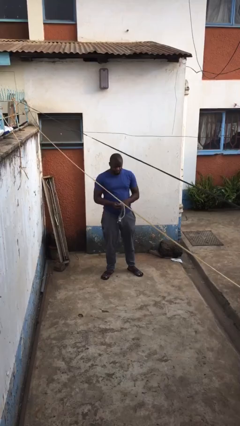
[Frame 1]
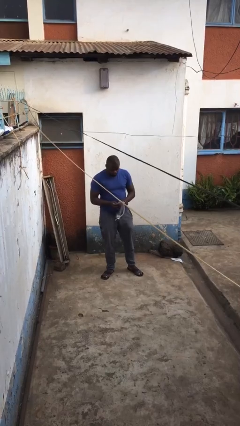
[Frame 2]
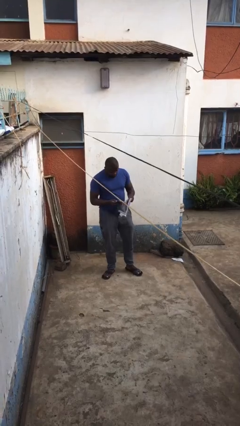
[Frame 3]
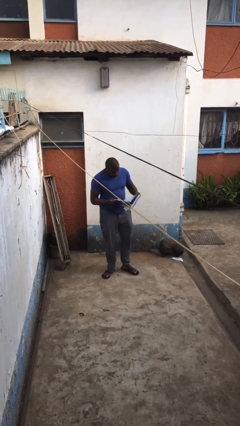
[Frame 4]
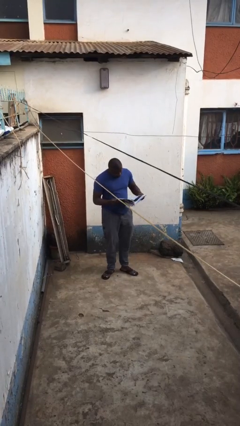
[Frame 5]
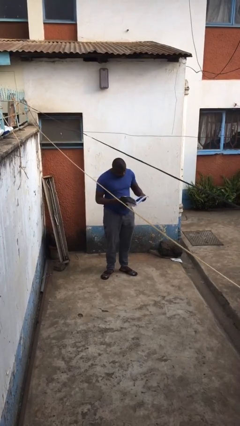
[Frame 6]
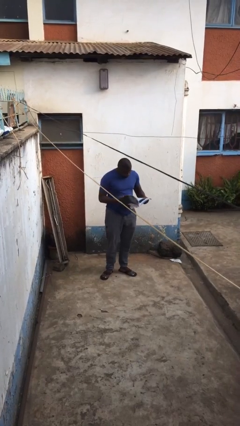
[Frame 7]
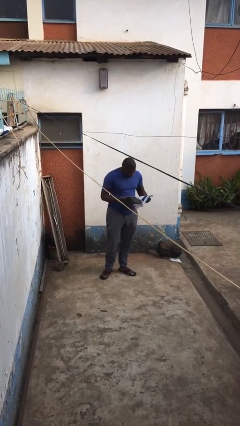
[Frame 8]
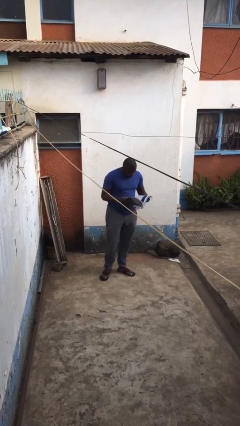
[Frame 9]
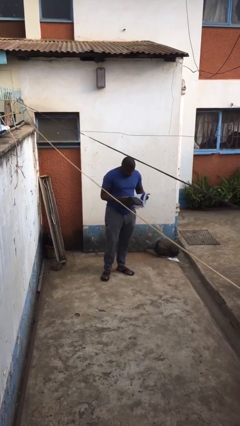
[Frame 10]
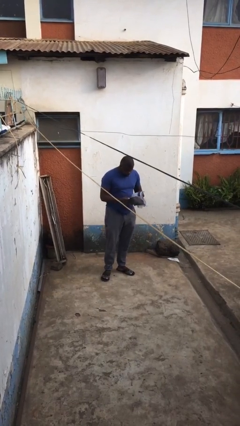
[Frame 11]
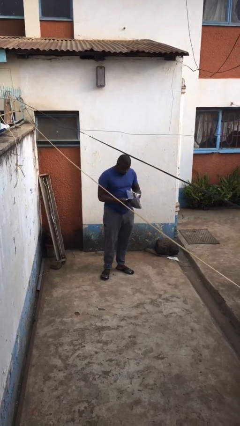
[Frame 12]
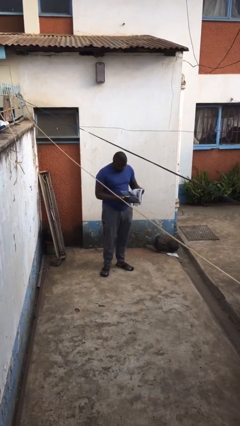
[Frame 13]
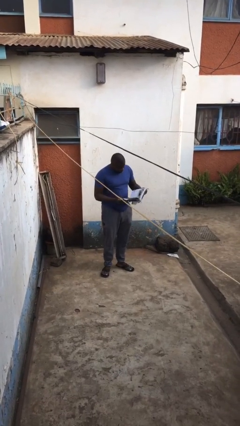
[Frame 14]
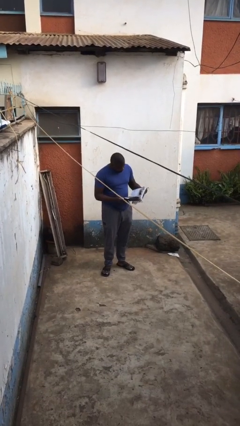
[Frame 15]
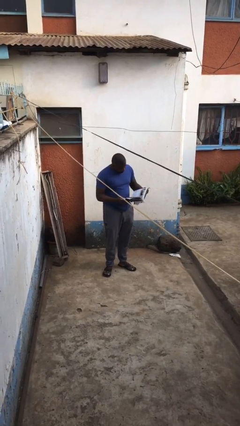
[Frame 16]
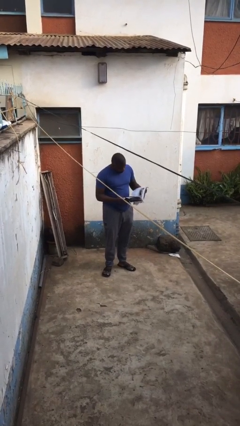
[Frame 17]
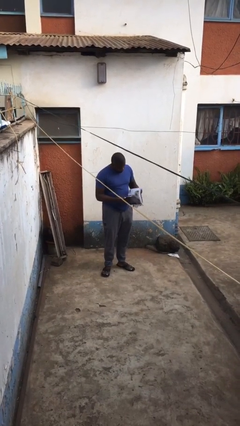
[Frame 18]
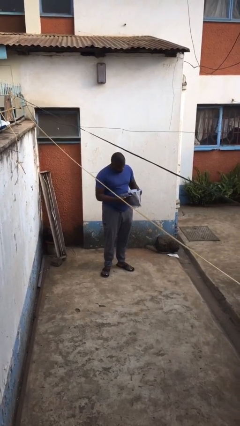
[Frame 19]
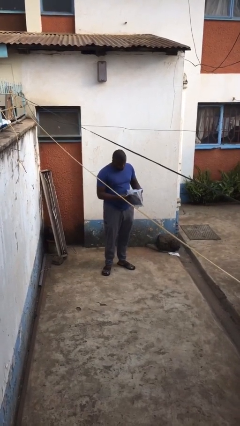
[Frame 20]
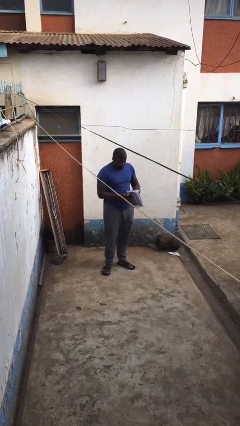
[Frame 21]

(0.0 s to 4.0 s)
person reads magazine

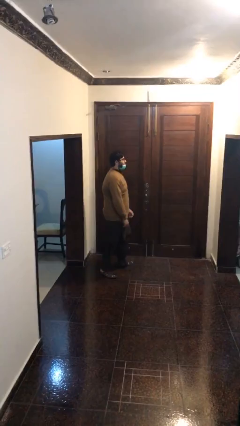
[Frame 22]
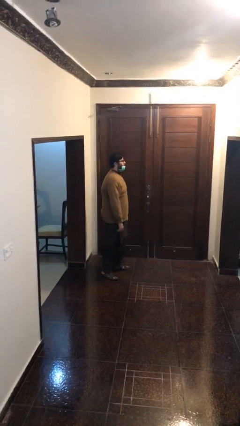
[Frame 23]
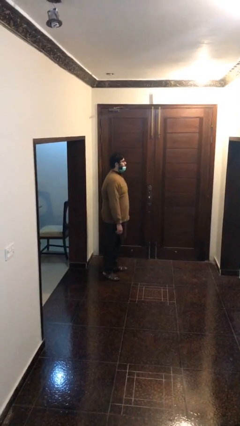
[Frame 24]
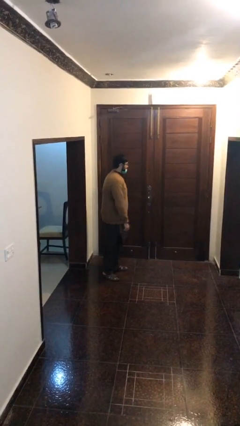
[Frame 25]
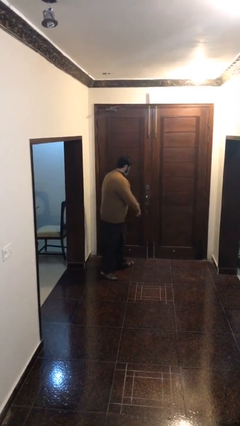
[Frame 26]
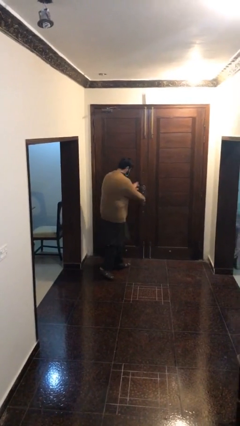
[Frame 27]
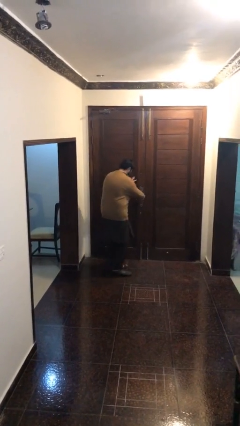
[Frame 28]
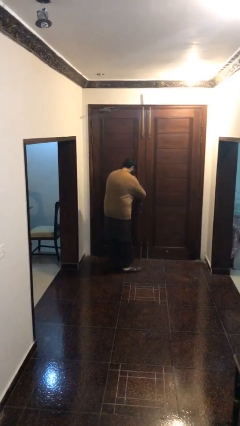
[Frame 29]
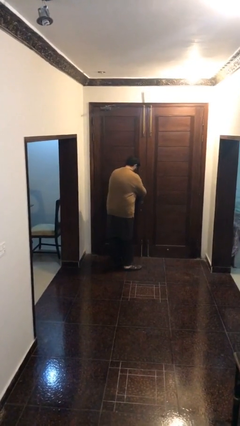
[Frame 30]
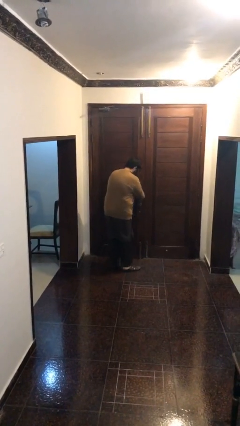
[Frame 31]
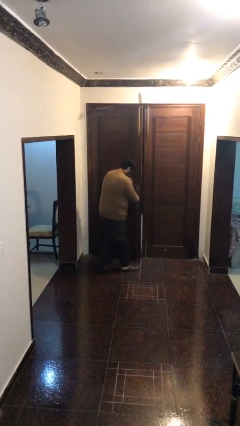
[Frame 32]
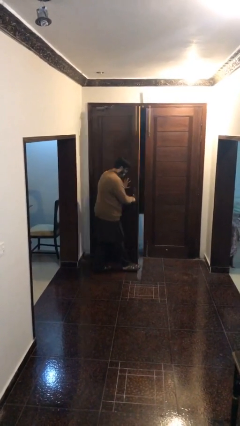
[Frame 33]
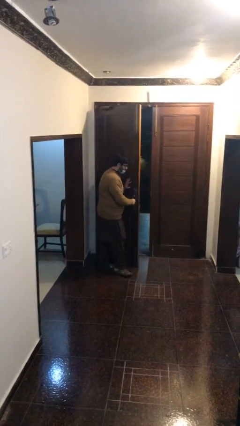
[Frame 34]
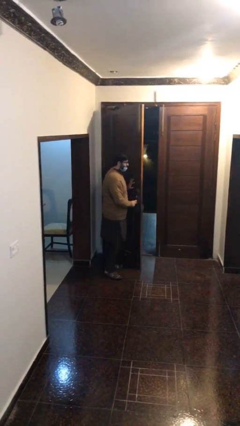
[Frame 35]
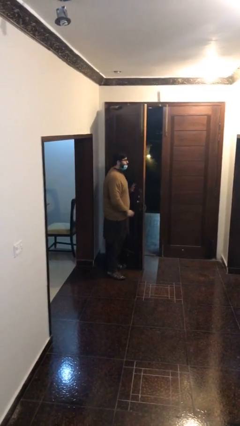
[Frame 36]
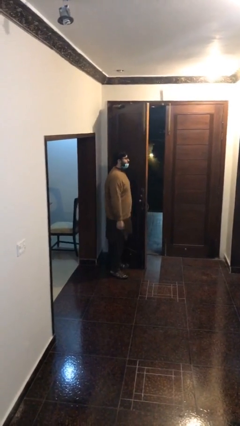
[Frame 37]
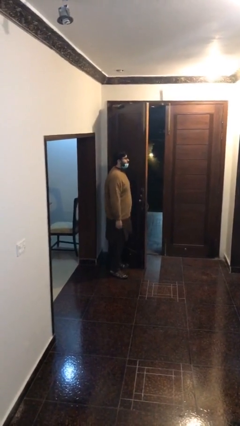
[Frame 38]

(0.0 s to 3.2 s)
person opens facility door

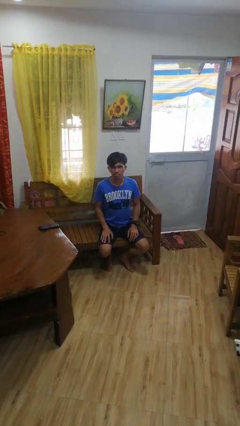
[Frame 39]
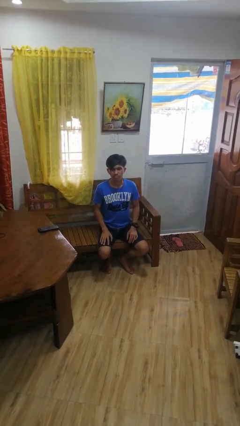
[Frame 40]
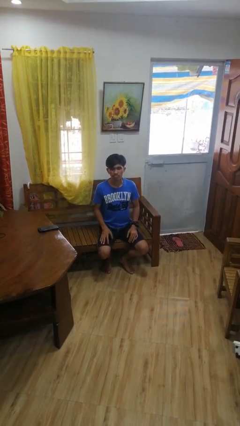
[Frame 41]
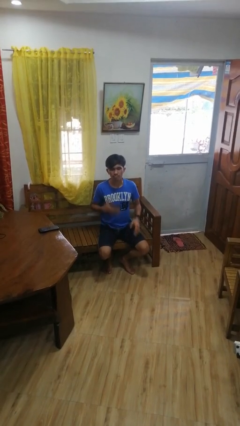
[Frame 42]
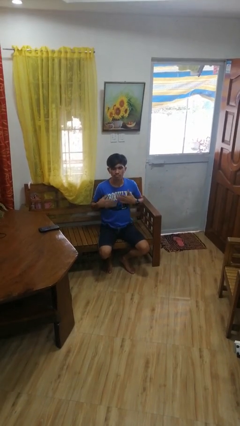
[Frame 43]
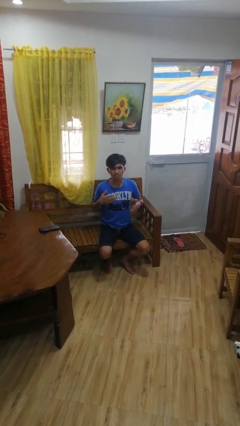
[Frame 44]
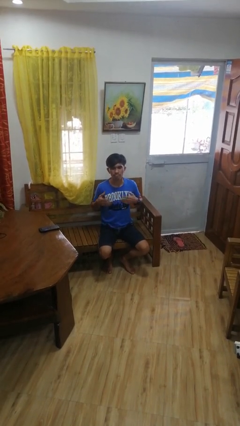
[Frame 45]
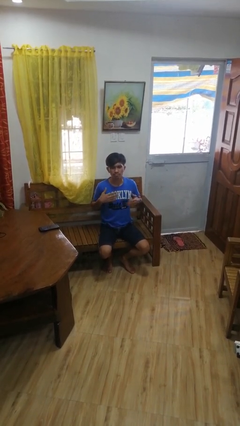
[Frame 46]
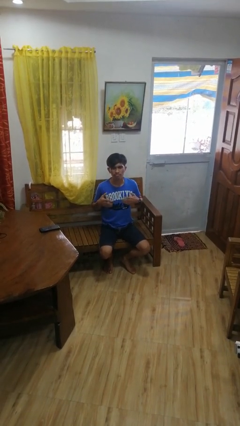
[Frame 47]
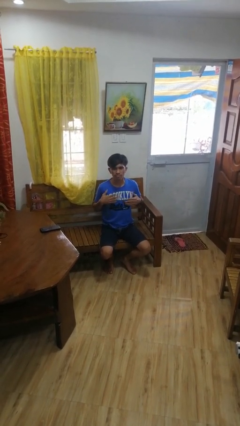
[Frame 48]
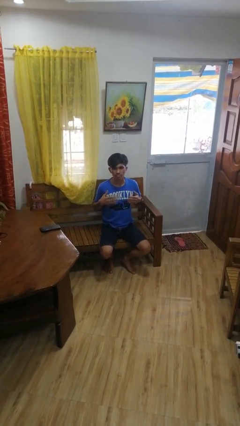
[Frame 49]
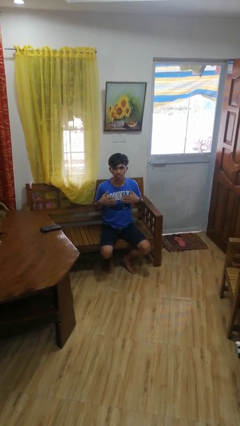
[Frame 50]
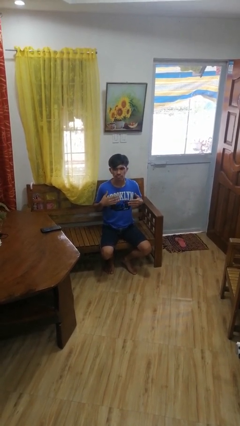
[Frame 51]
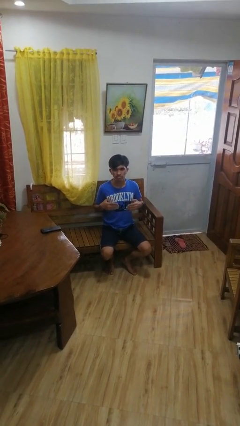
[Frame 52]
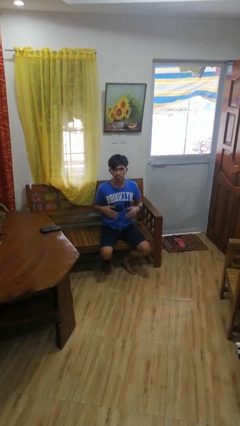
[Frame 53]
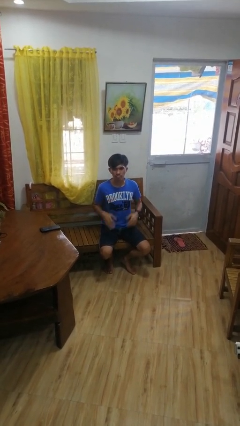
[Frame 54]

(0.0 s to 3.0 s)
person drums on chest

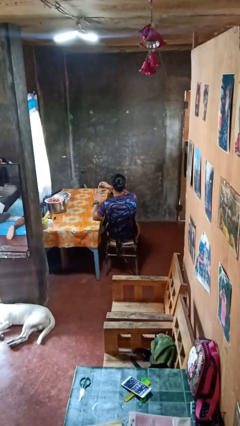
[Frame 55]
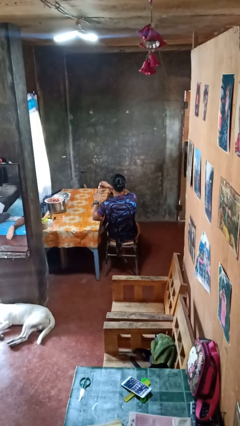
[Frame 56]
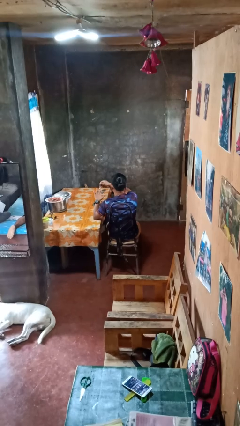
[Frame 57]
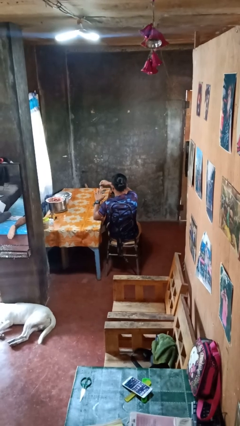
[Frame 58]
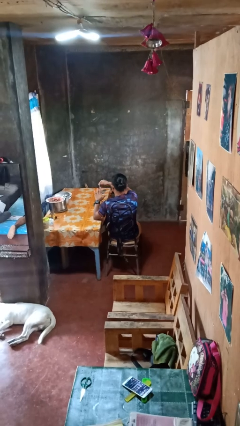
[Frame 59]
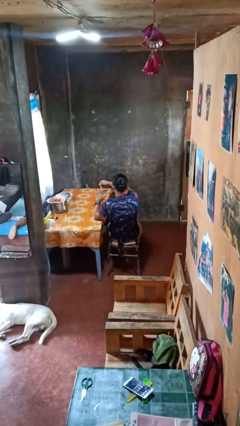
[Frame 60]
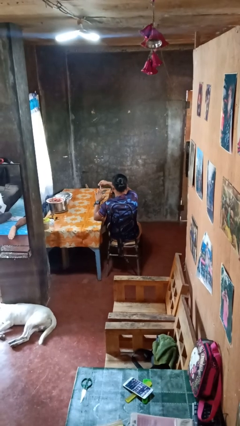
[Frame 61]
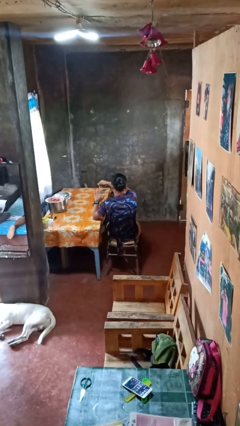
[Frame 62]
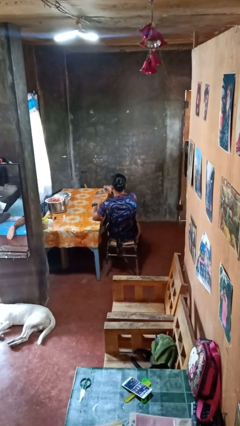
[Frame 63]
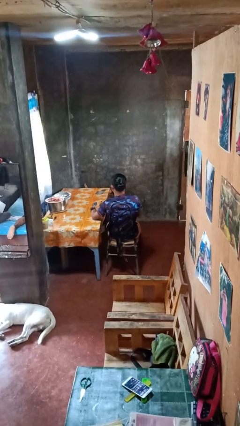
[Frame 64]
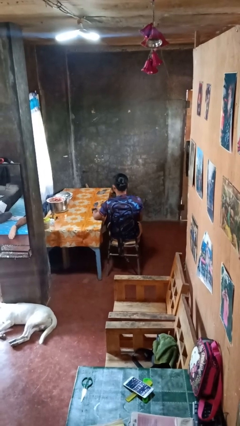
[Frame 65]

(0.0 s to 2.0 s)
person clips fingernails

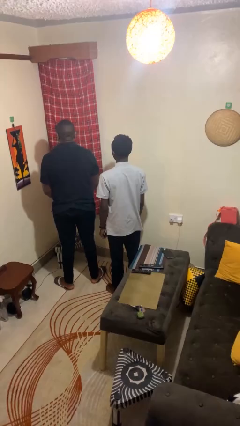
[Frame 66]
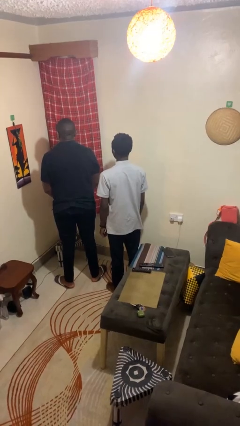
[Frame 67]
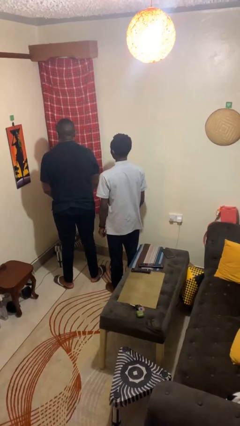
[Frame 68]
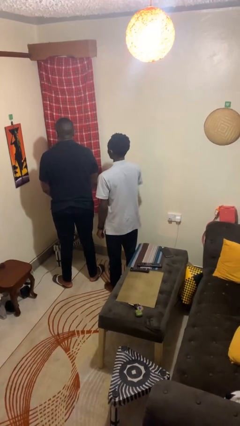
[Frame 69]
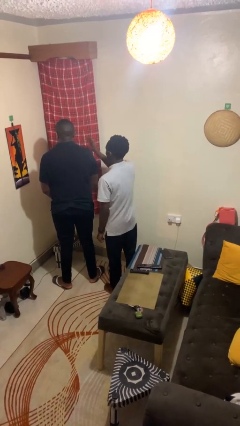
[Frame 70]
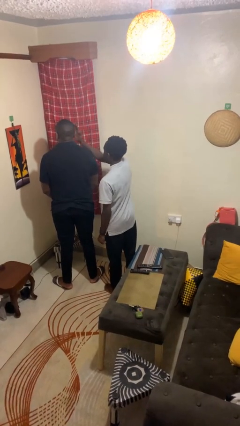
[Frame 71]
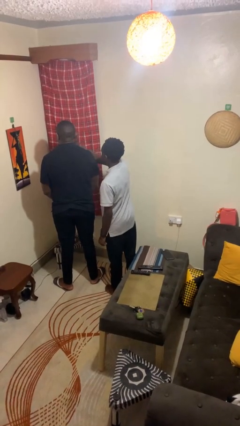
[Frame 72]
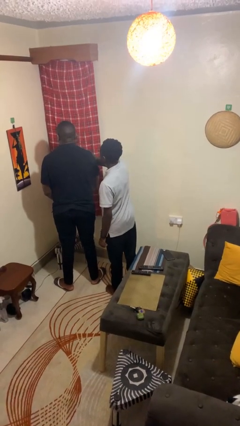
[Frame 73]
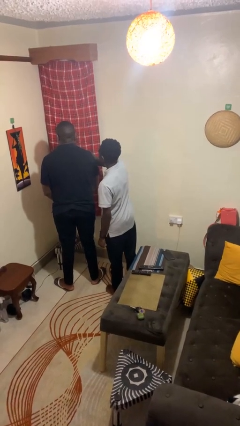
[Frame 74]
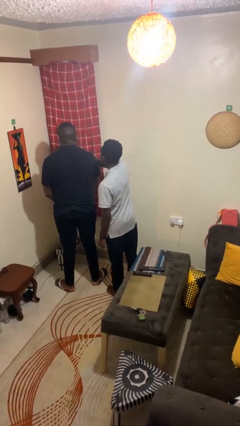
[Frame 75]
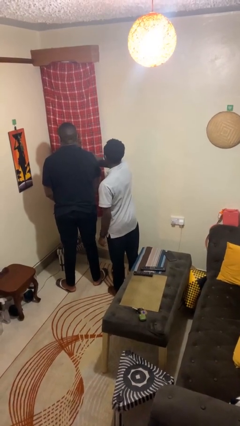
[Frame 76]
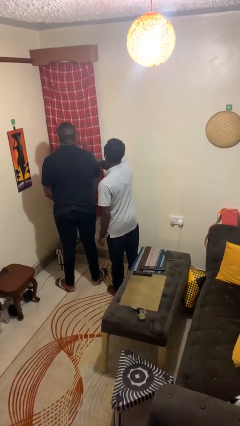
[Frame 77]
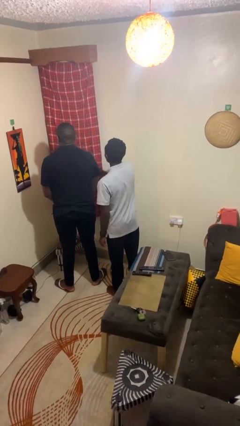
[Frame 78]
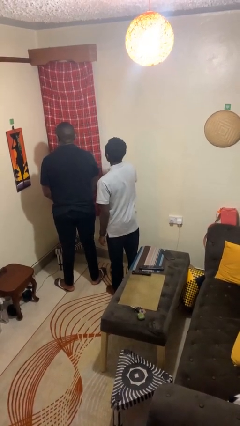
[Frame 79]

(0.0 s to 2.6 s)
person touches face of person

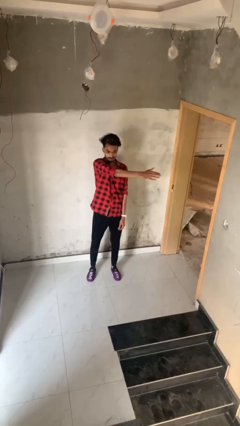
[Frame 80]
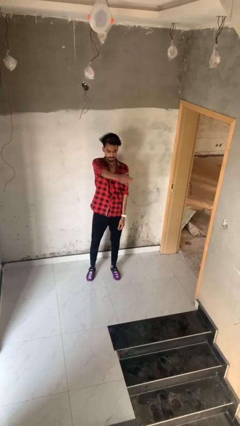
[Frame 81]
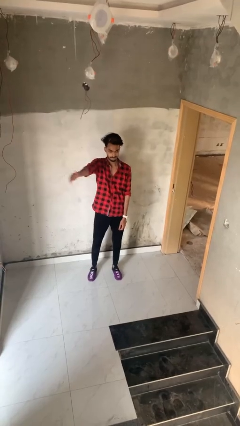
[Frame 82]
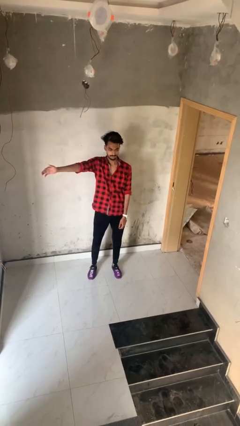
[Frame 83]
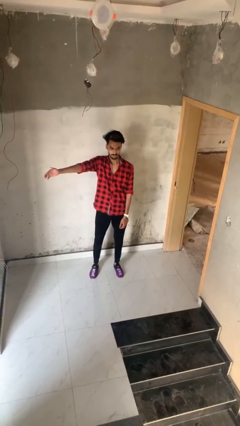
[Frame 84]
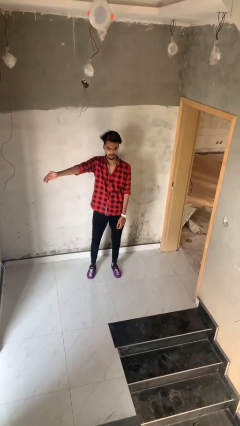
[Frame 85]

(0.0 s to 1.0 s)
person gestures swipe right

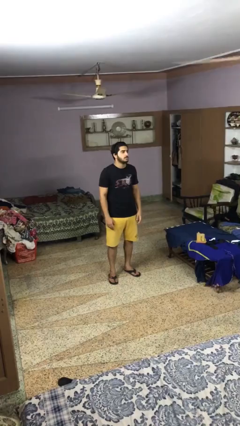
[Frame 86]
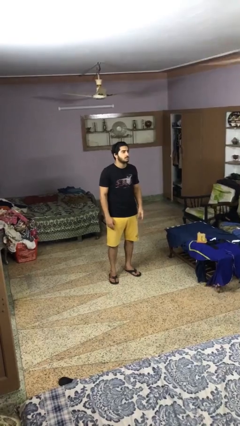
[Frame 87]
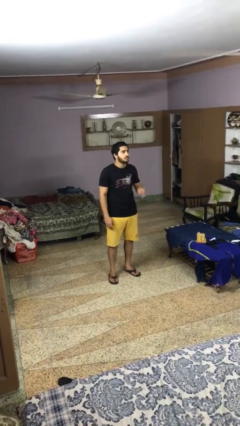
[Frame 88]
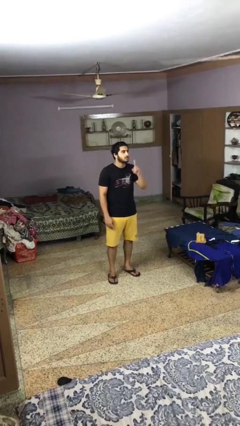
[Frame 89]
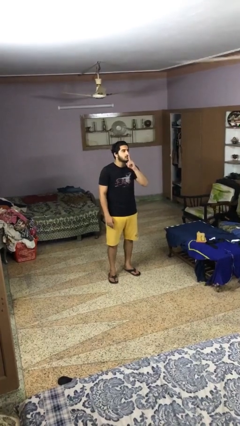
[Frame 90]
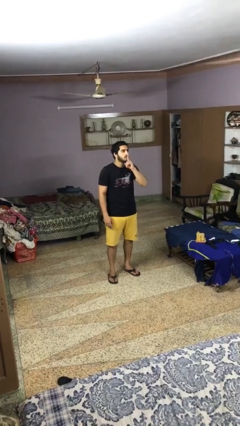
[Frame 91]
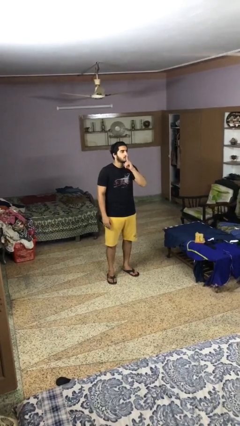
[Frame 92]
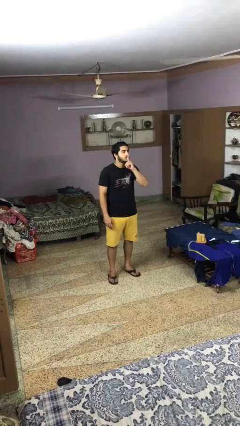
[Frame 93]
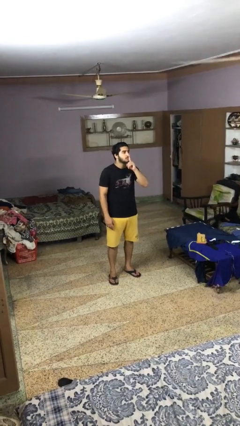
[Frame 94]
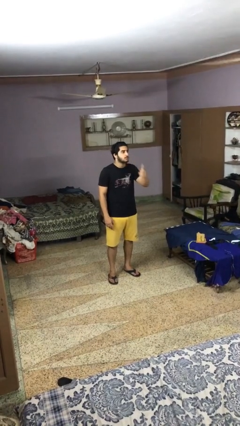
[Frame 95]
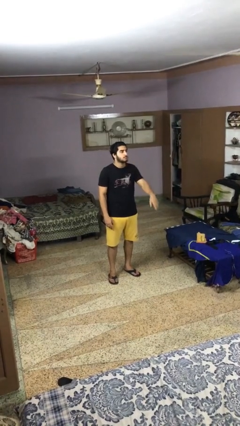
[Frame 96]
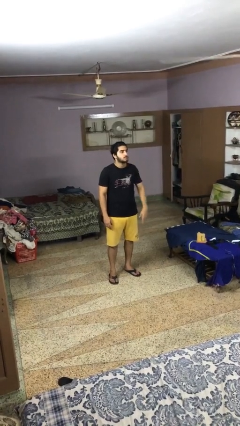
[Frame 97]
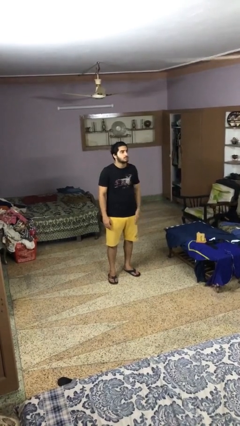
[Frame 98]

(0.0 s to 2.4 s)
person gestures be quiet
